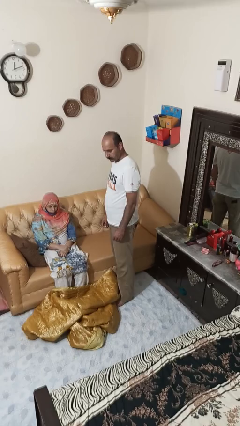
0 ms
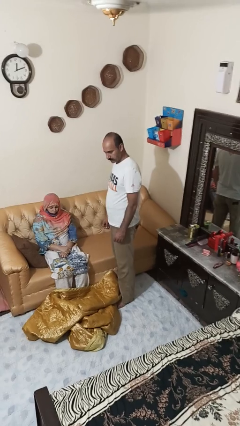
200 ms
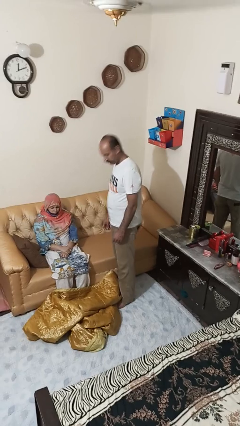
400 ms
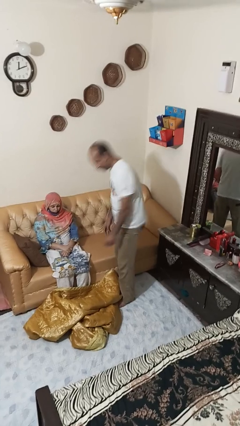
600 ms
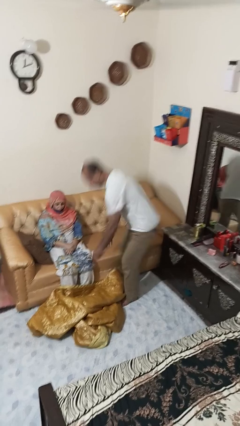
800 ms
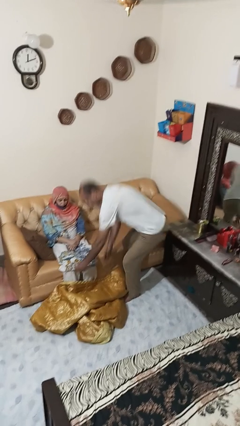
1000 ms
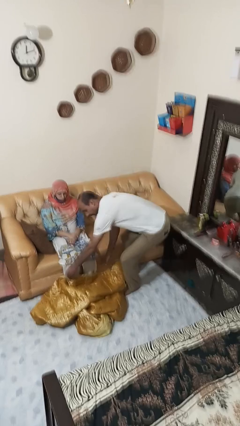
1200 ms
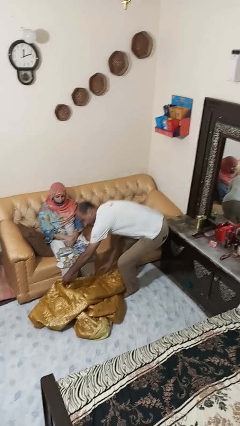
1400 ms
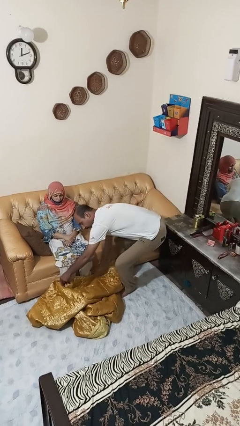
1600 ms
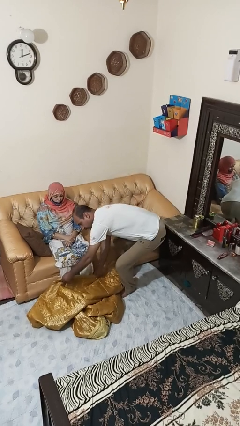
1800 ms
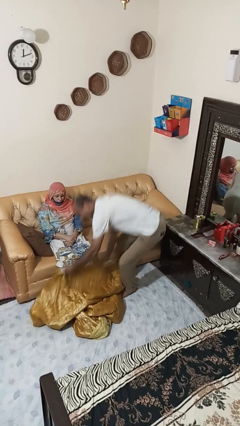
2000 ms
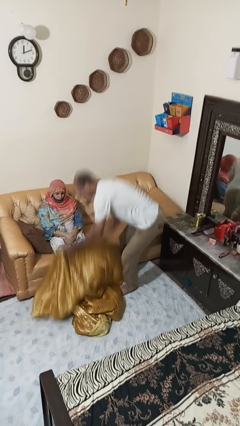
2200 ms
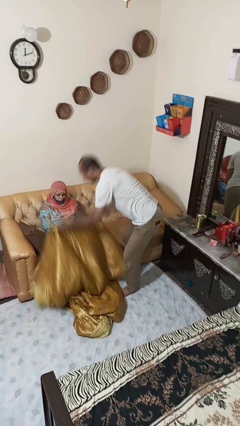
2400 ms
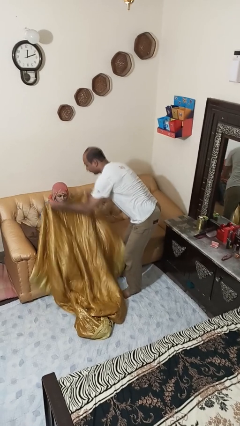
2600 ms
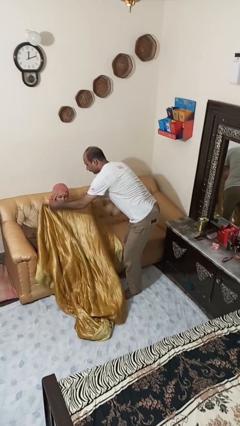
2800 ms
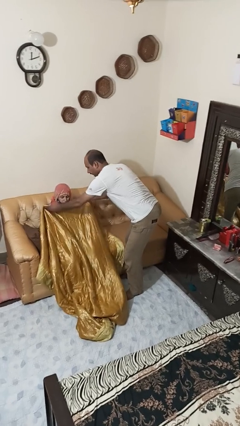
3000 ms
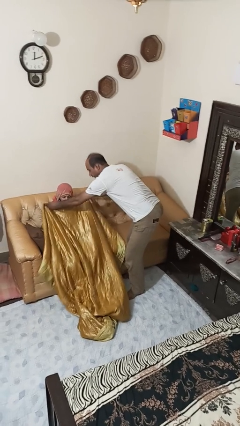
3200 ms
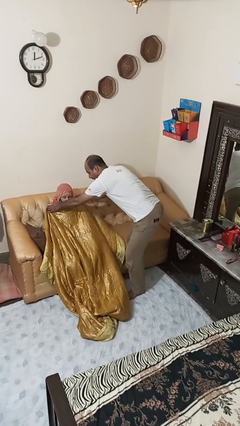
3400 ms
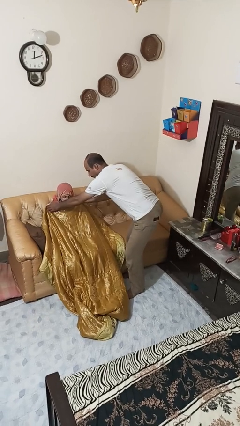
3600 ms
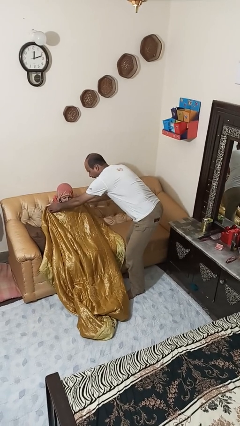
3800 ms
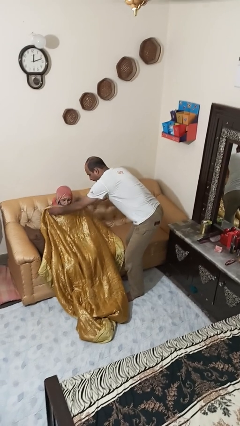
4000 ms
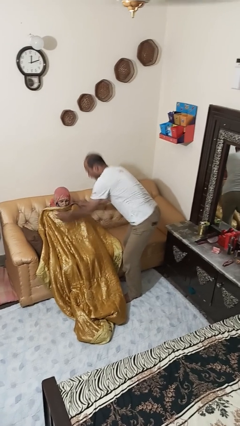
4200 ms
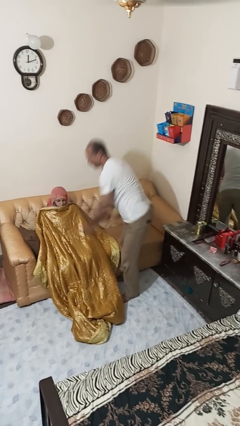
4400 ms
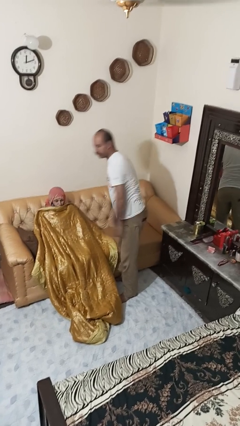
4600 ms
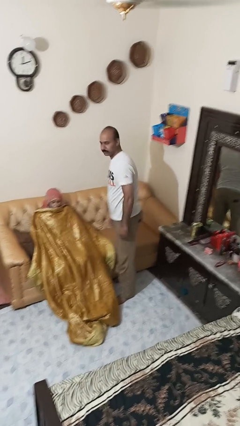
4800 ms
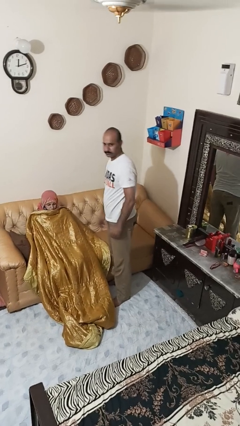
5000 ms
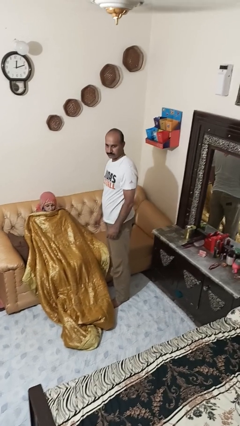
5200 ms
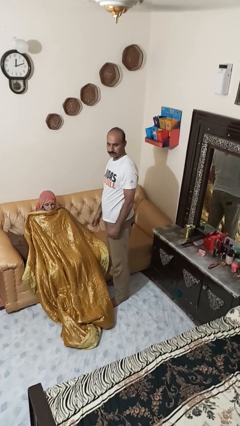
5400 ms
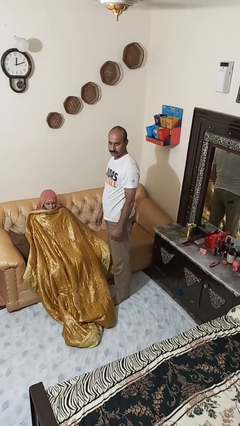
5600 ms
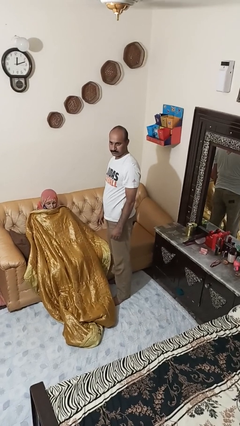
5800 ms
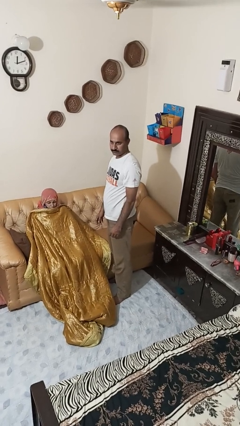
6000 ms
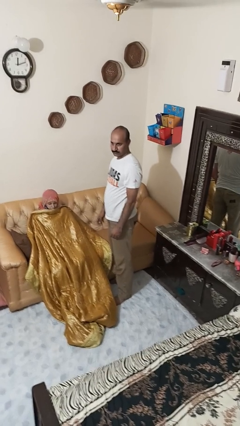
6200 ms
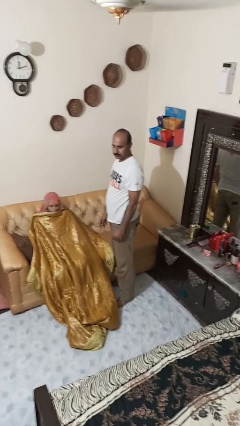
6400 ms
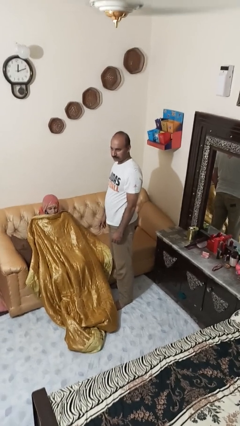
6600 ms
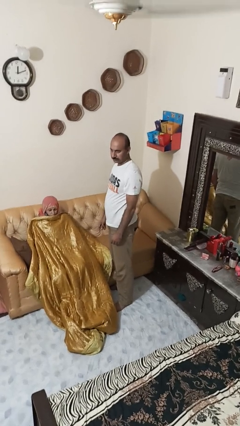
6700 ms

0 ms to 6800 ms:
person covers friend with blanket

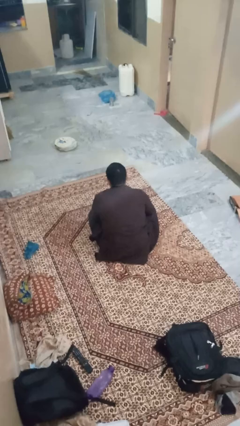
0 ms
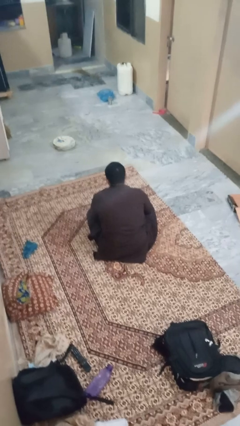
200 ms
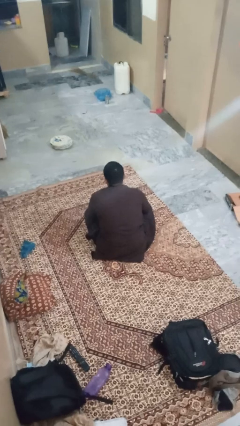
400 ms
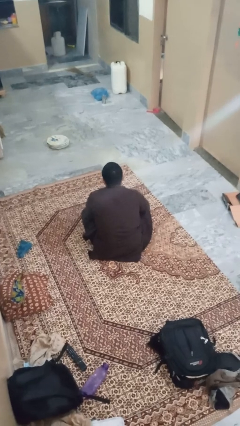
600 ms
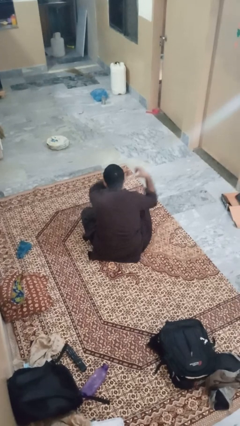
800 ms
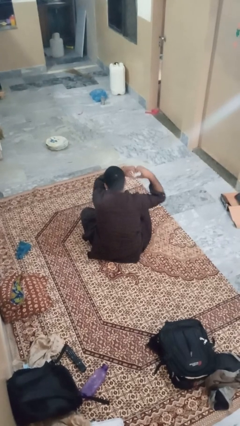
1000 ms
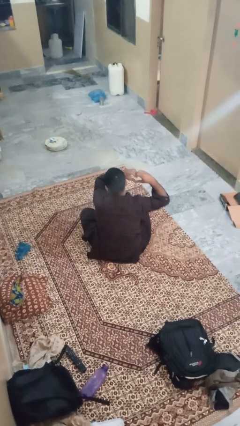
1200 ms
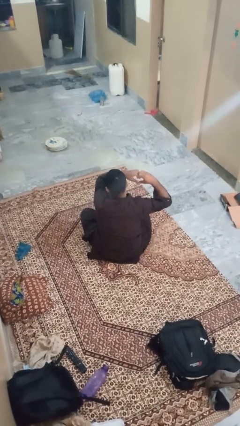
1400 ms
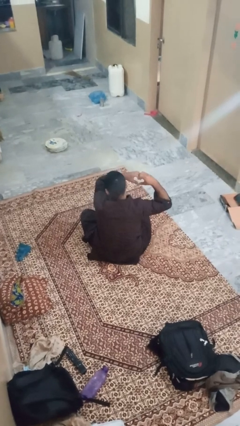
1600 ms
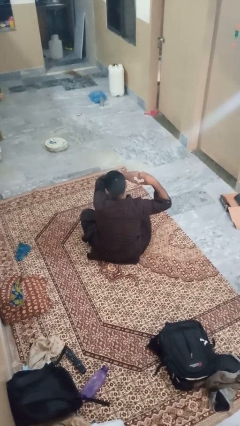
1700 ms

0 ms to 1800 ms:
person gestures heart

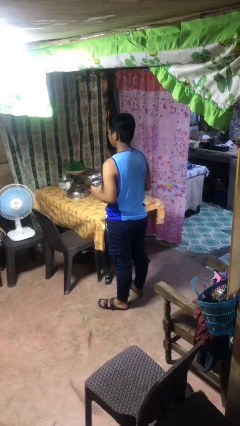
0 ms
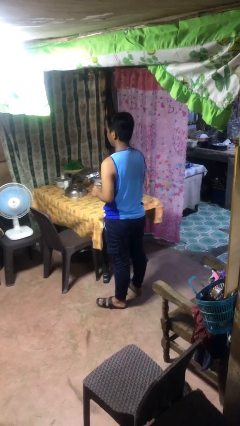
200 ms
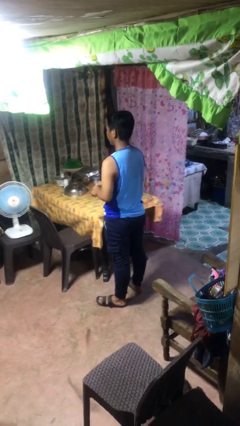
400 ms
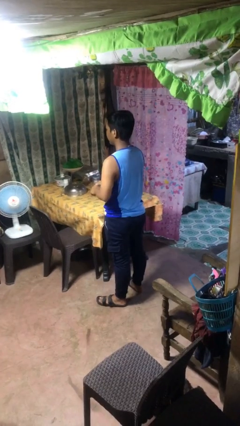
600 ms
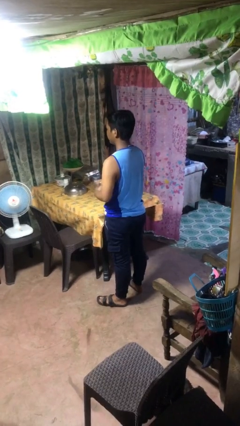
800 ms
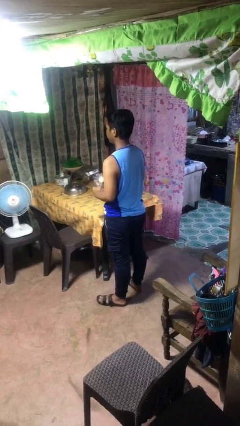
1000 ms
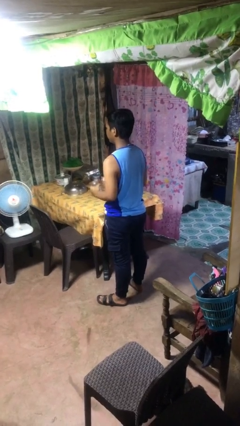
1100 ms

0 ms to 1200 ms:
person opens jar

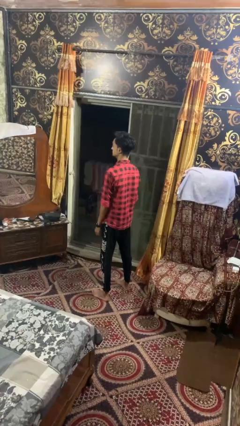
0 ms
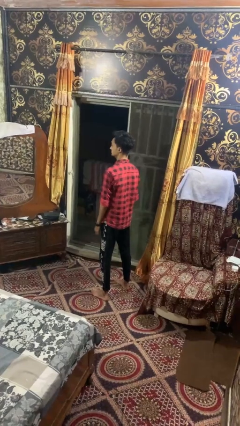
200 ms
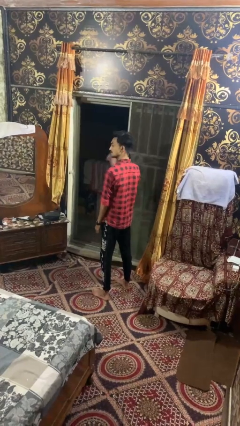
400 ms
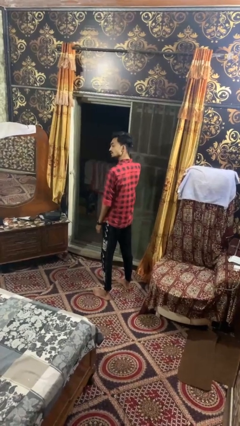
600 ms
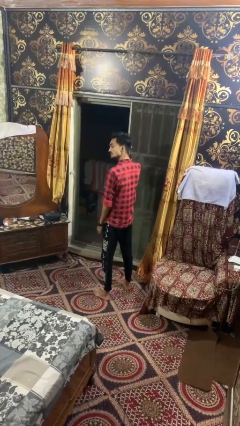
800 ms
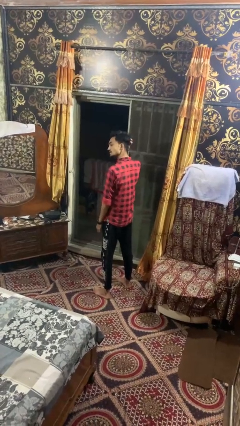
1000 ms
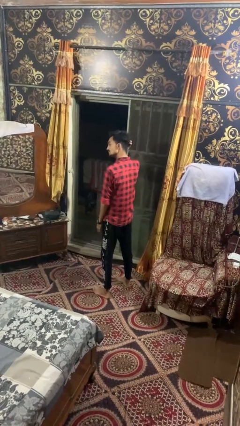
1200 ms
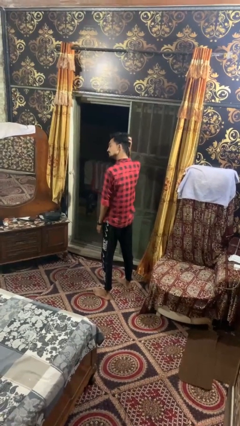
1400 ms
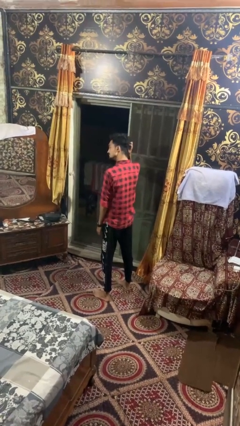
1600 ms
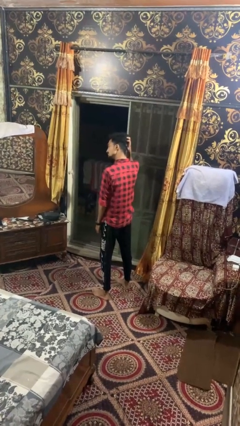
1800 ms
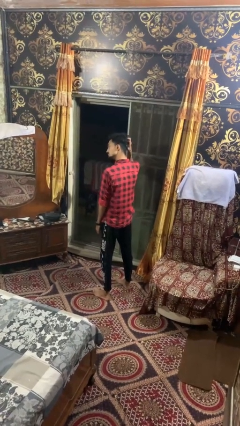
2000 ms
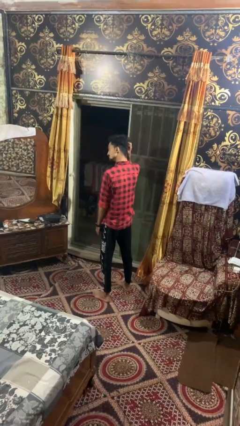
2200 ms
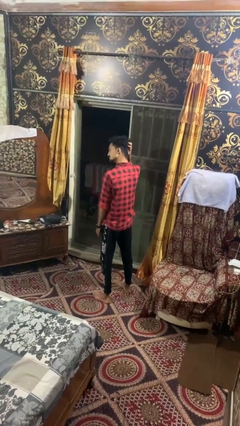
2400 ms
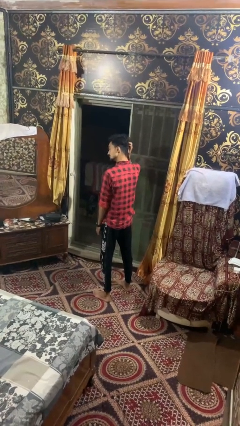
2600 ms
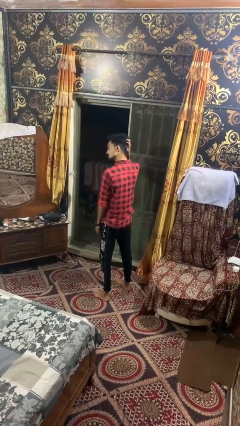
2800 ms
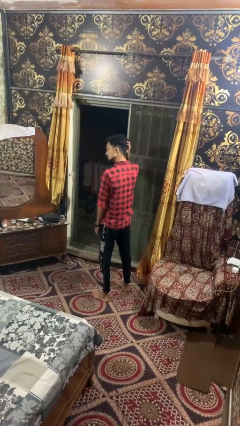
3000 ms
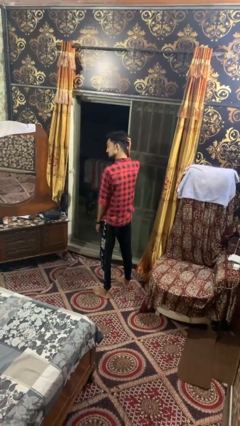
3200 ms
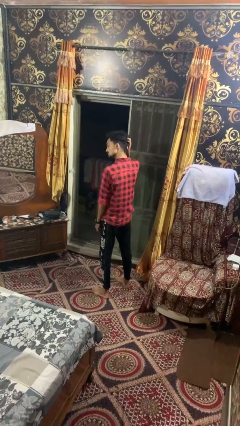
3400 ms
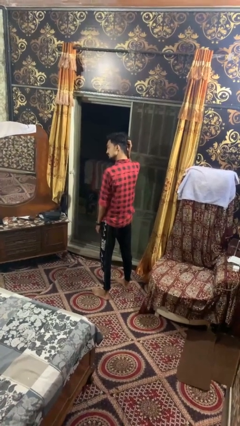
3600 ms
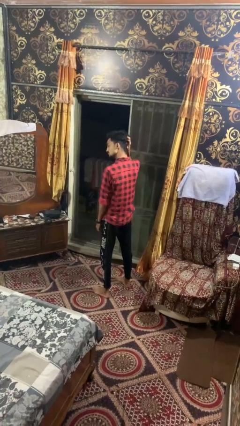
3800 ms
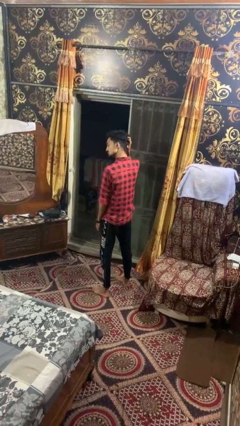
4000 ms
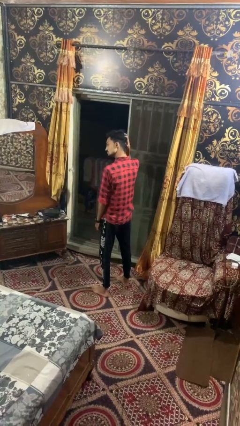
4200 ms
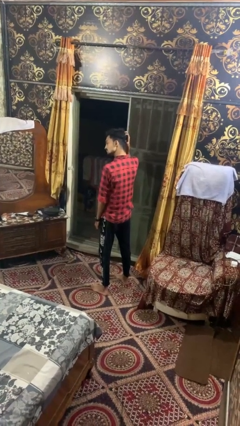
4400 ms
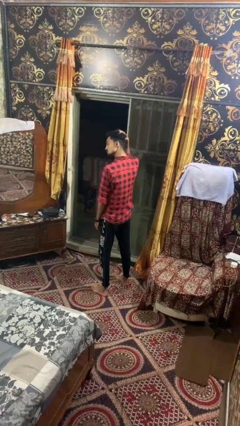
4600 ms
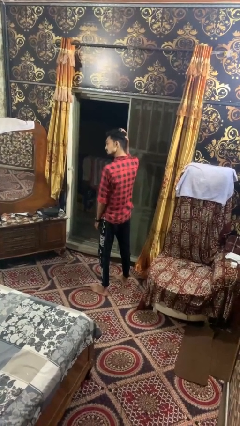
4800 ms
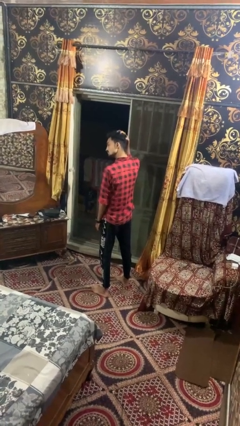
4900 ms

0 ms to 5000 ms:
person scratches face

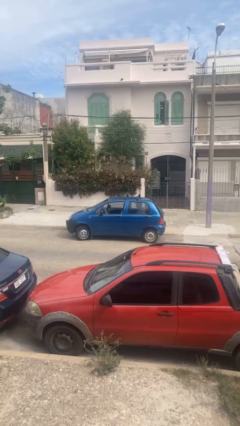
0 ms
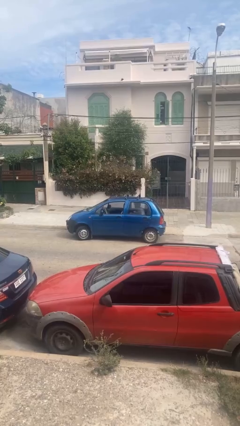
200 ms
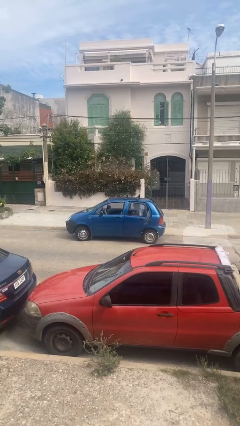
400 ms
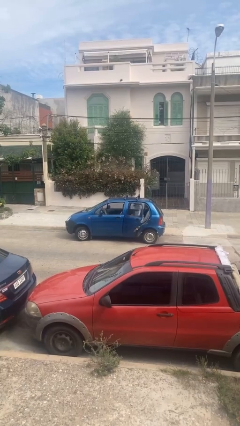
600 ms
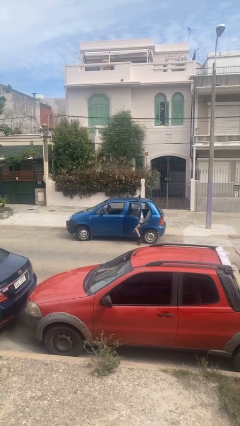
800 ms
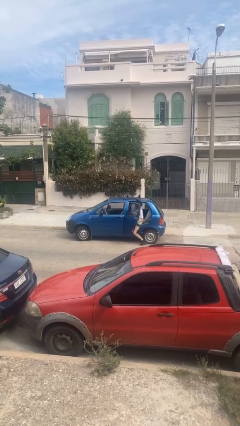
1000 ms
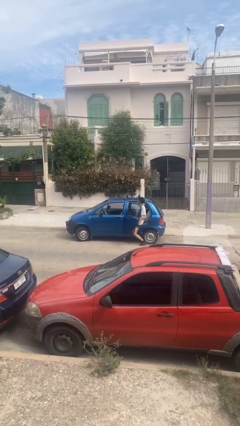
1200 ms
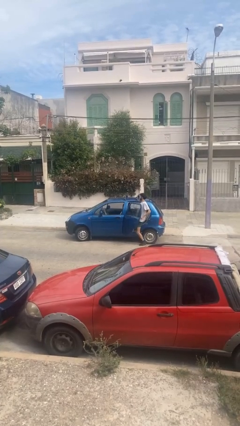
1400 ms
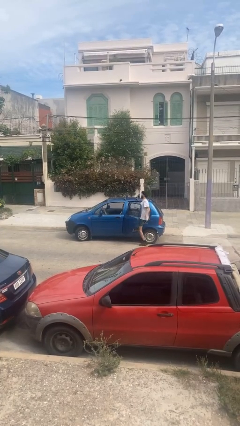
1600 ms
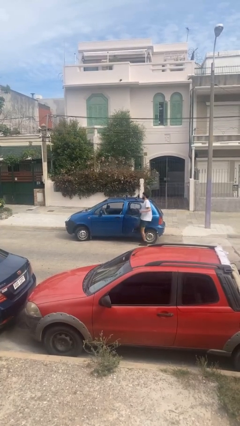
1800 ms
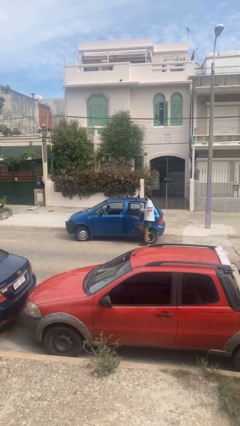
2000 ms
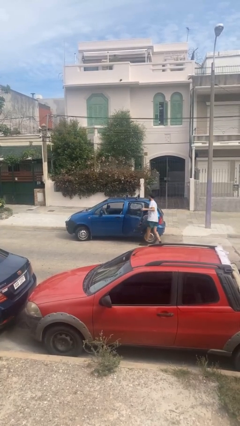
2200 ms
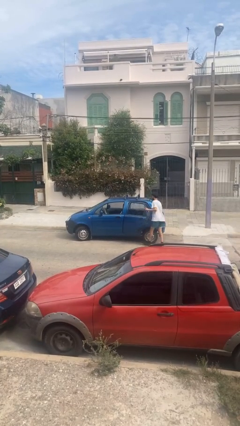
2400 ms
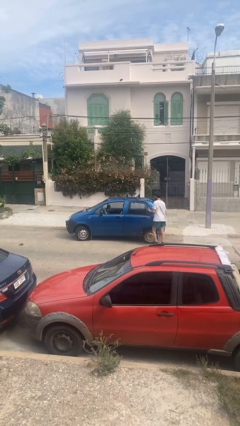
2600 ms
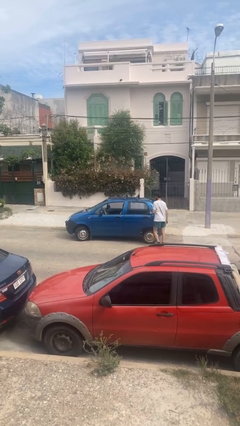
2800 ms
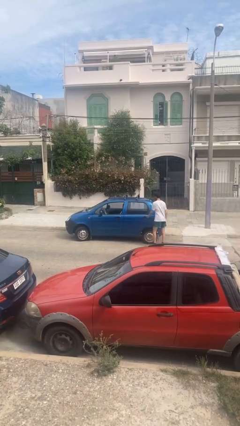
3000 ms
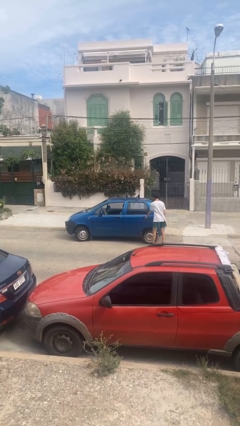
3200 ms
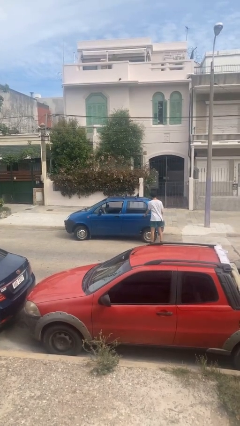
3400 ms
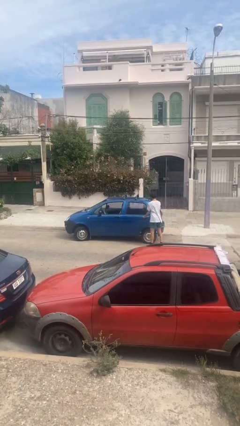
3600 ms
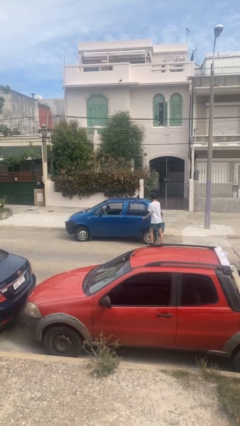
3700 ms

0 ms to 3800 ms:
car drops off person
